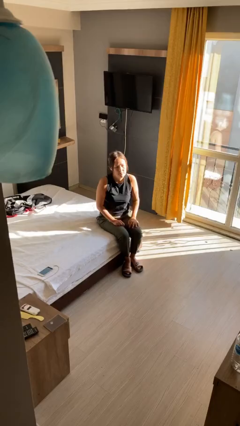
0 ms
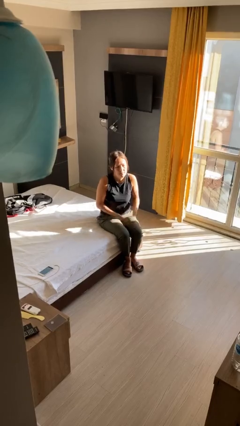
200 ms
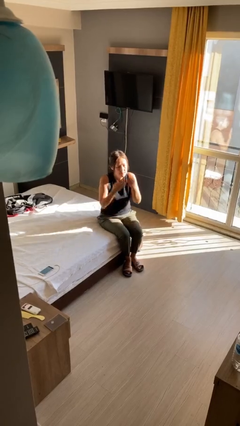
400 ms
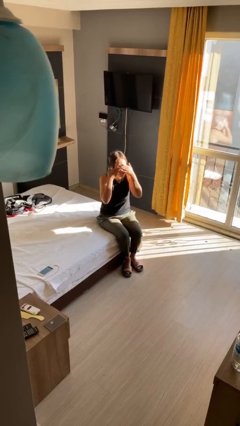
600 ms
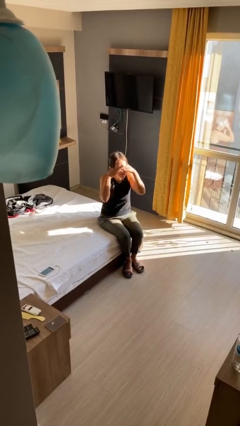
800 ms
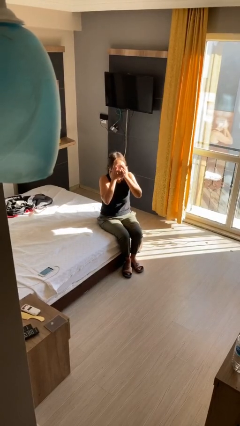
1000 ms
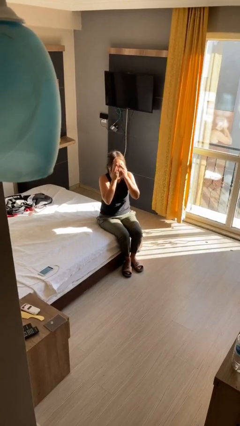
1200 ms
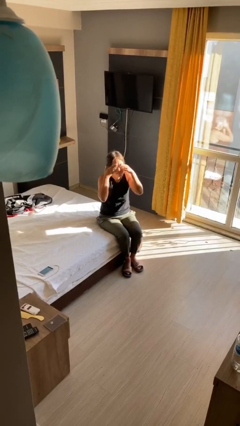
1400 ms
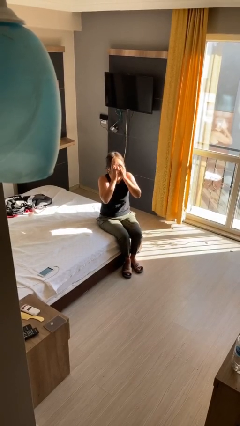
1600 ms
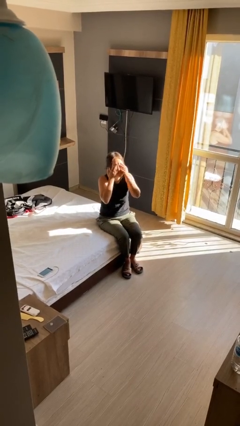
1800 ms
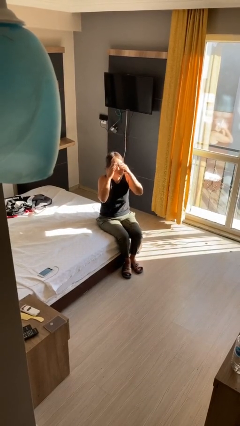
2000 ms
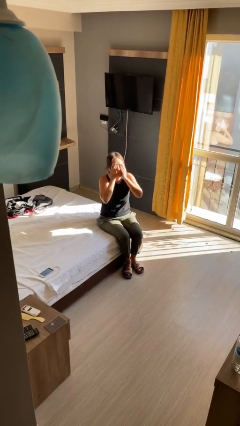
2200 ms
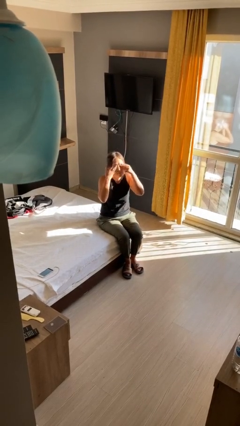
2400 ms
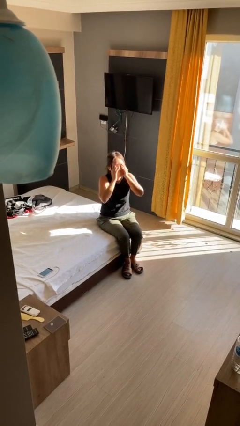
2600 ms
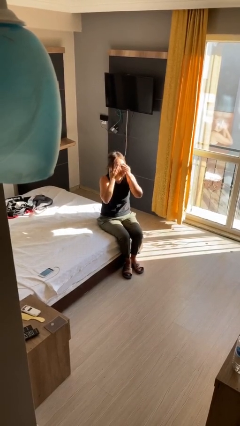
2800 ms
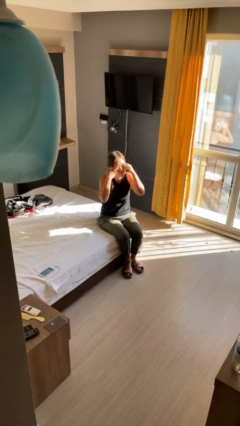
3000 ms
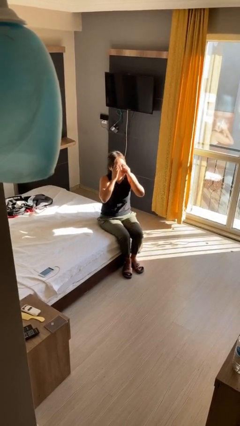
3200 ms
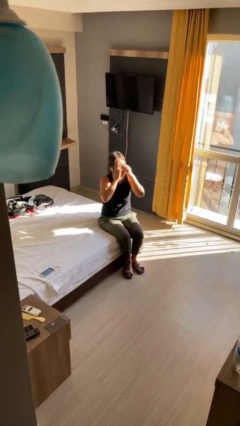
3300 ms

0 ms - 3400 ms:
person rubs eyes

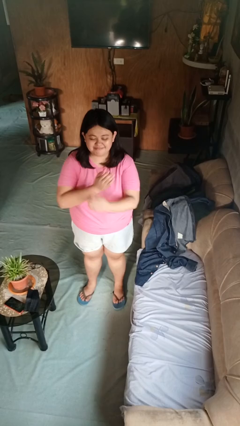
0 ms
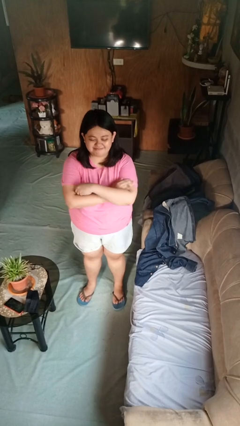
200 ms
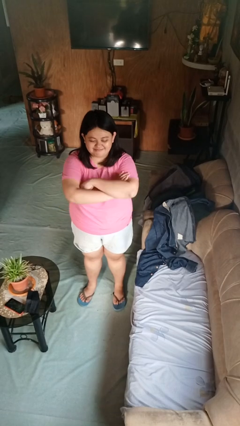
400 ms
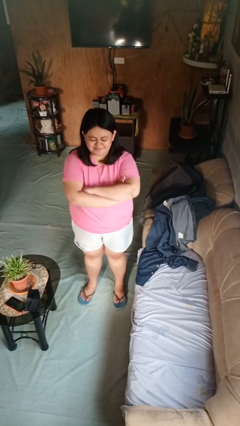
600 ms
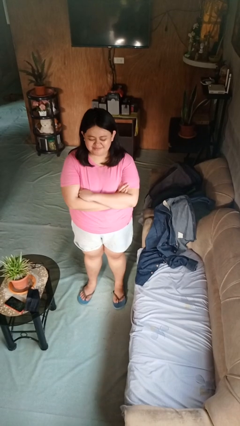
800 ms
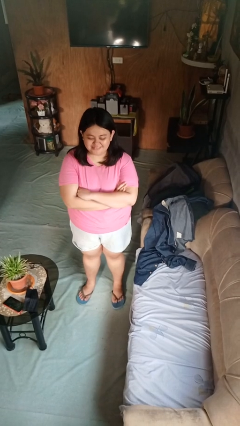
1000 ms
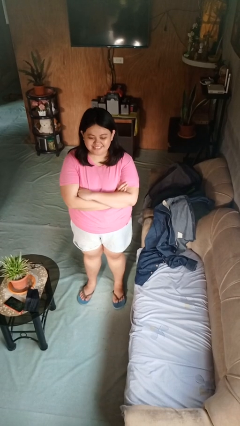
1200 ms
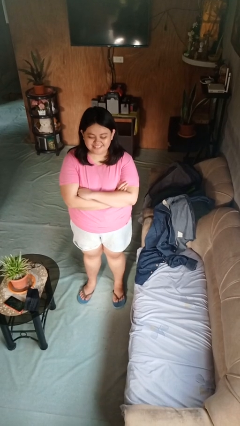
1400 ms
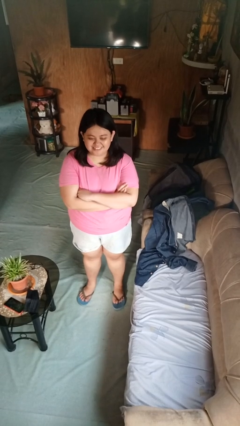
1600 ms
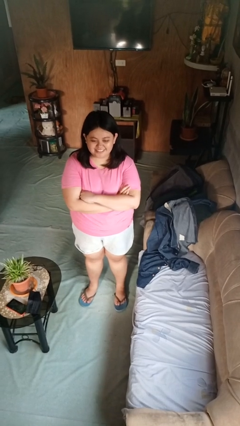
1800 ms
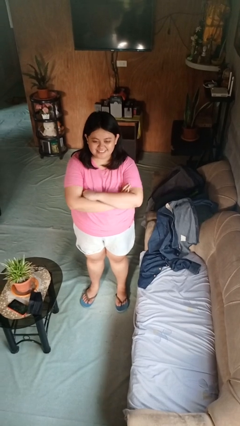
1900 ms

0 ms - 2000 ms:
person crosses arms

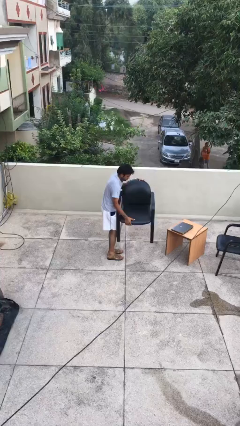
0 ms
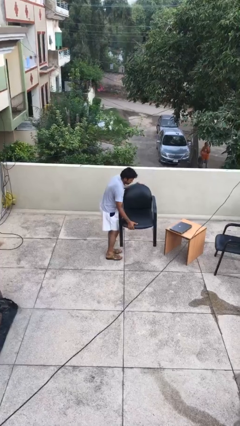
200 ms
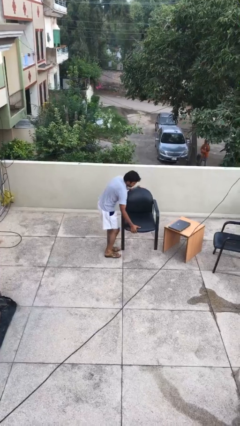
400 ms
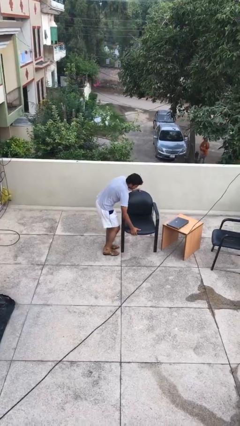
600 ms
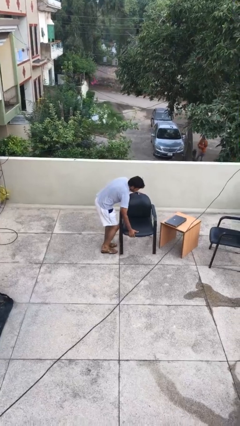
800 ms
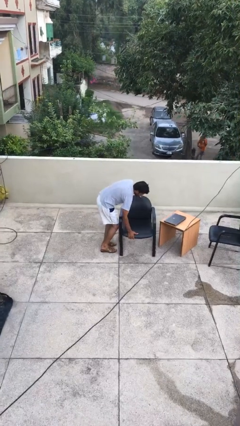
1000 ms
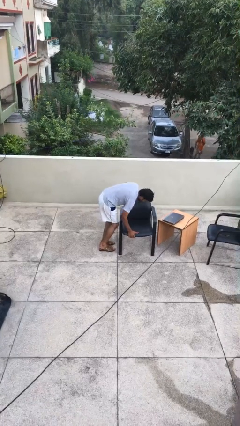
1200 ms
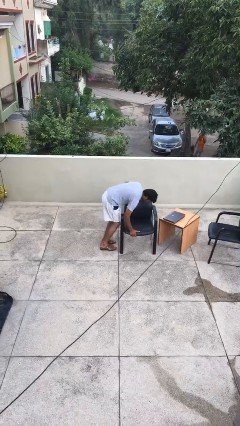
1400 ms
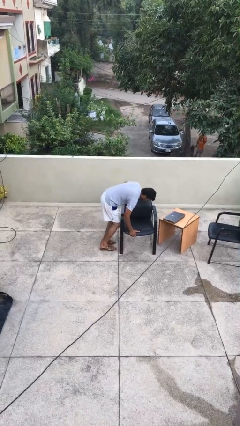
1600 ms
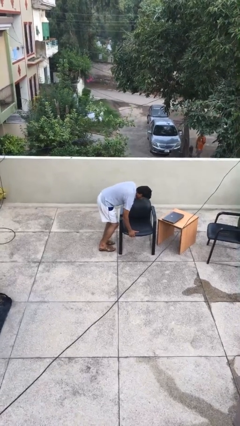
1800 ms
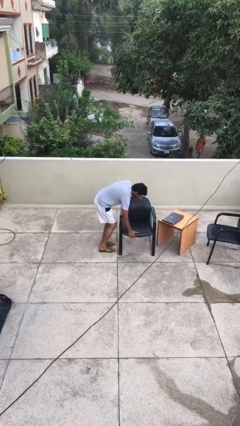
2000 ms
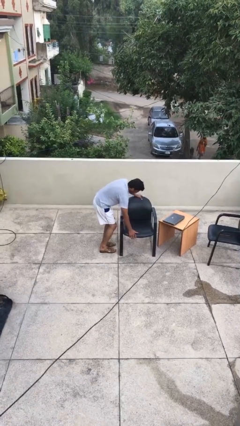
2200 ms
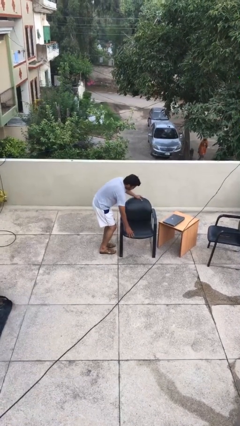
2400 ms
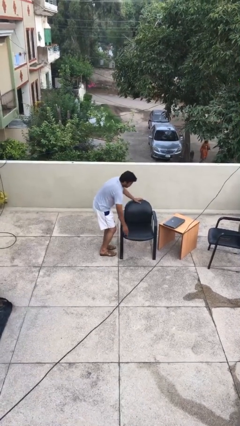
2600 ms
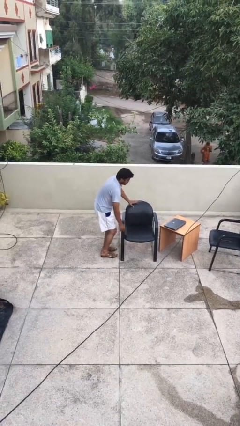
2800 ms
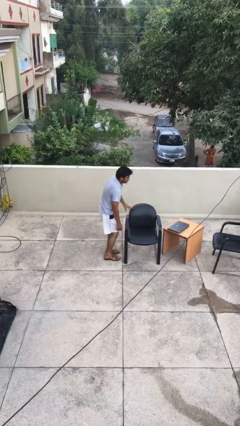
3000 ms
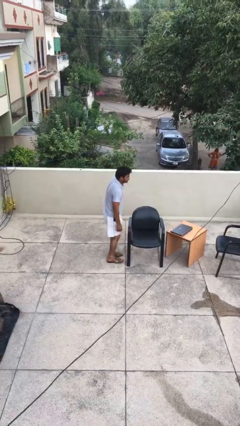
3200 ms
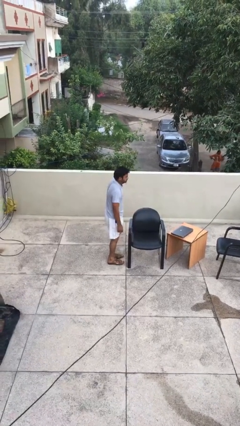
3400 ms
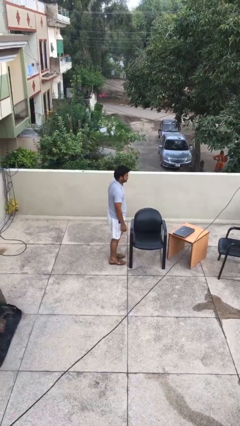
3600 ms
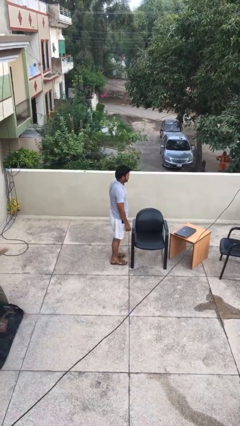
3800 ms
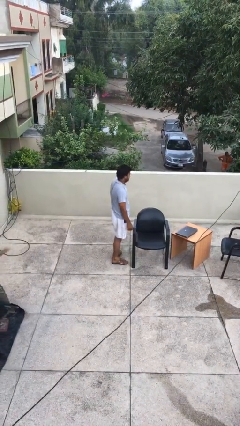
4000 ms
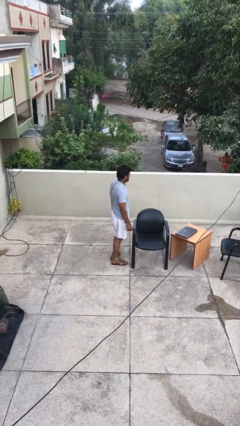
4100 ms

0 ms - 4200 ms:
person puts down object on floor

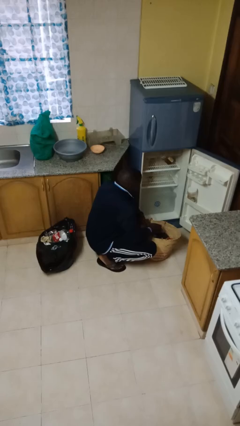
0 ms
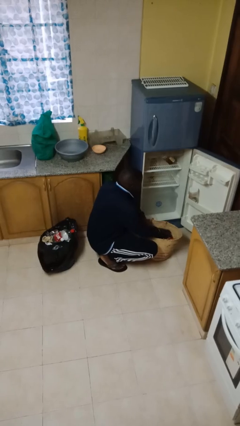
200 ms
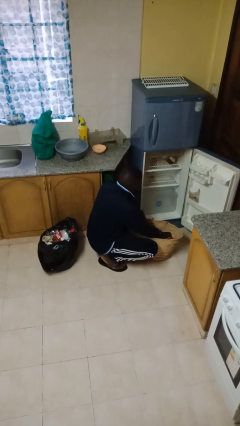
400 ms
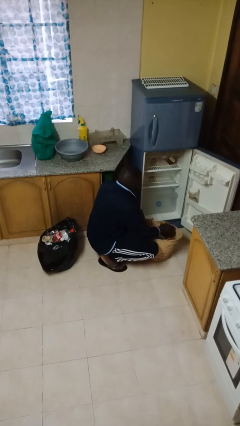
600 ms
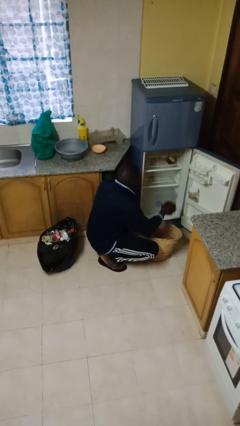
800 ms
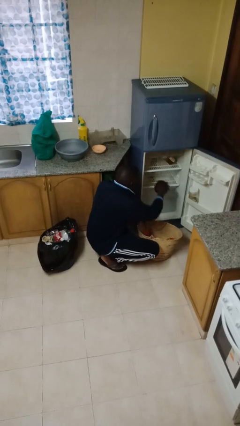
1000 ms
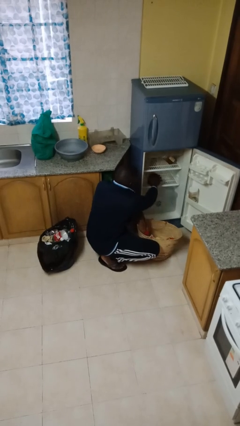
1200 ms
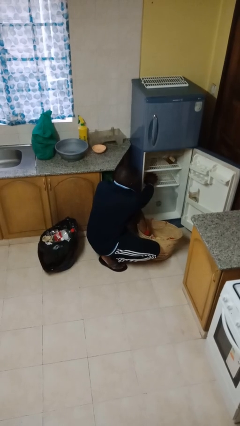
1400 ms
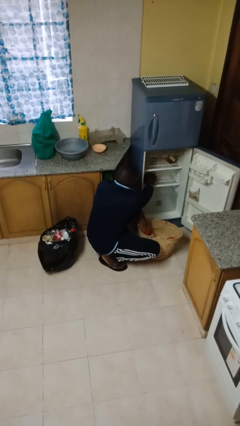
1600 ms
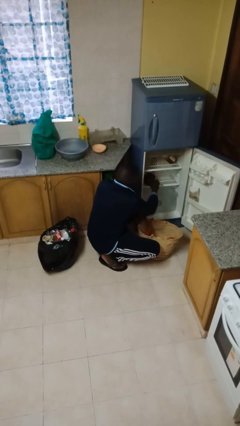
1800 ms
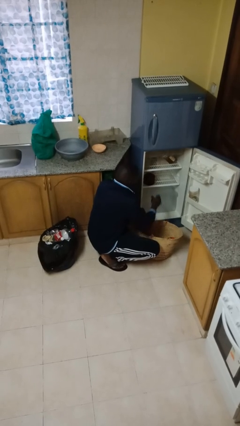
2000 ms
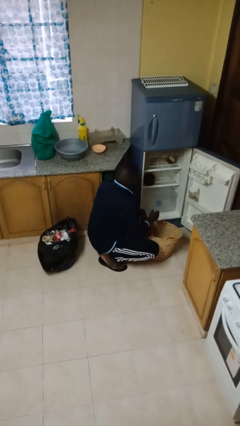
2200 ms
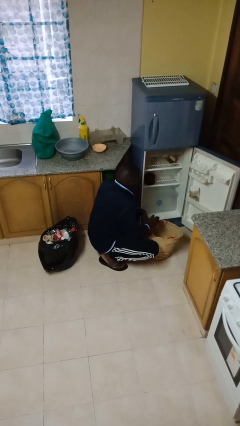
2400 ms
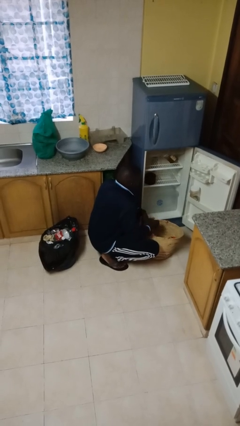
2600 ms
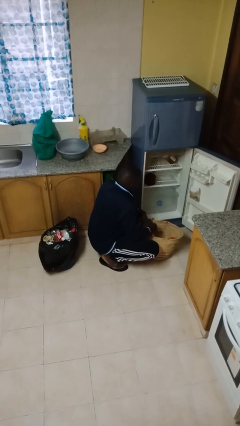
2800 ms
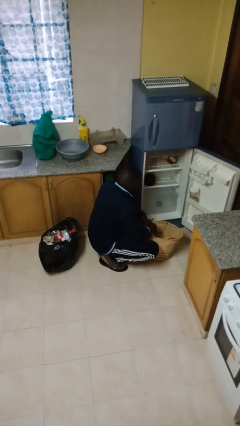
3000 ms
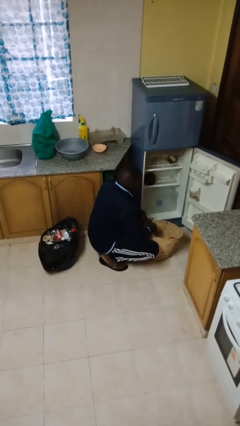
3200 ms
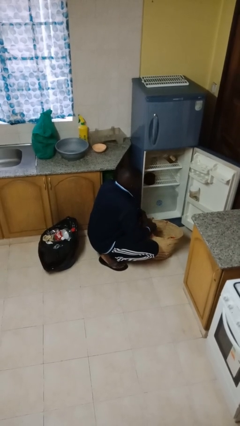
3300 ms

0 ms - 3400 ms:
person loads groceries into refrigerator

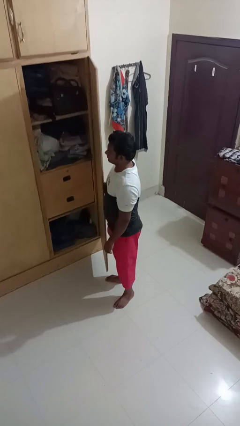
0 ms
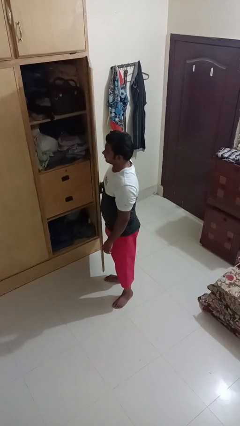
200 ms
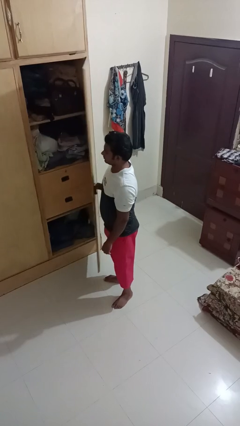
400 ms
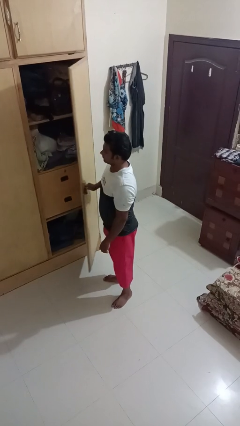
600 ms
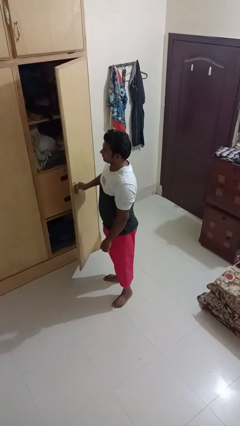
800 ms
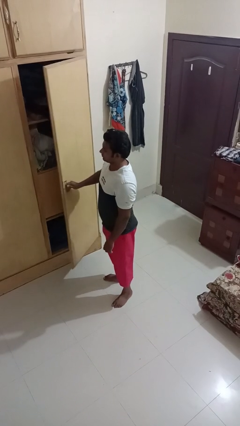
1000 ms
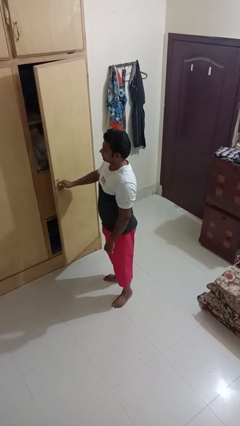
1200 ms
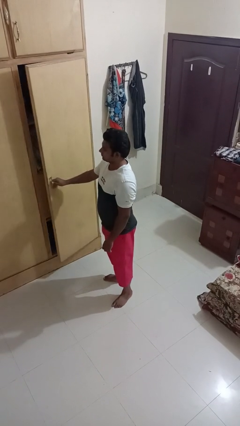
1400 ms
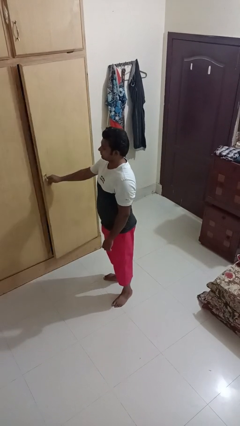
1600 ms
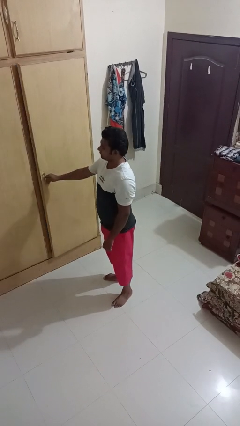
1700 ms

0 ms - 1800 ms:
person closes closet door

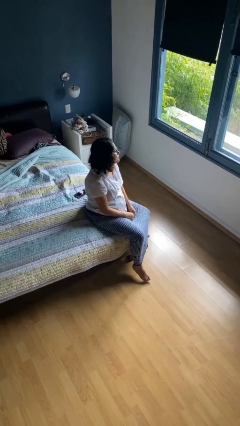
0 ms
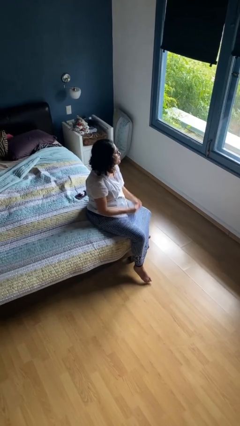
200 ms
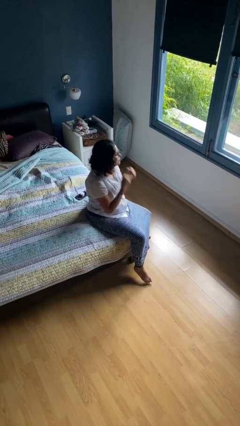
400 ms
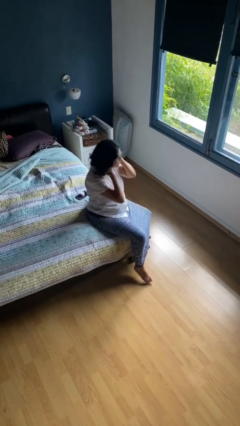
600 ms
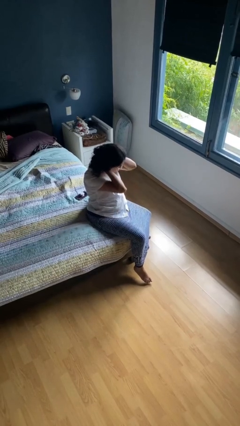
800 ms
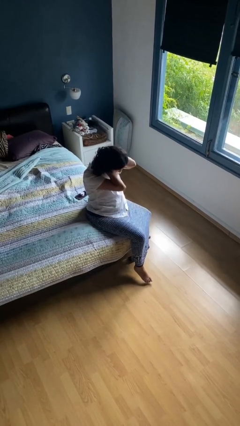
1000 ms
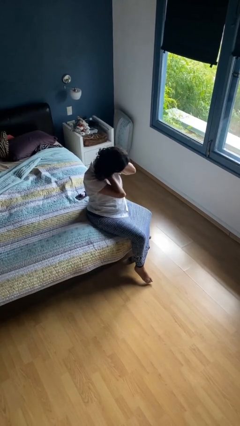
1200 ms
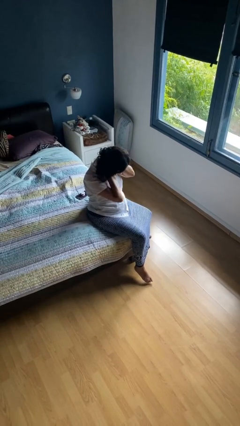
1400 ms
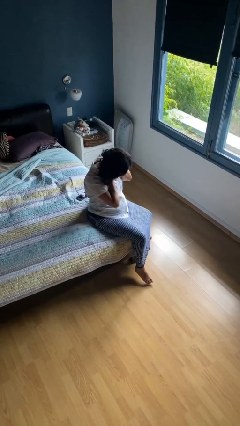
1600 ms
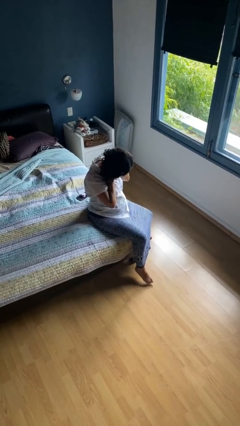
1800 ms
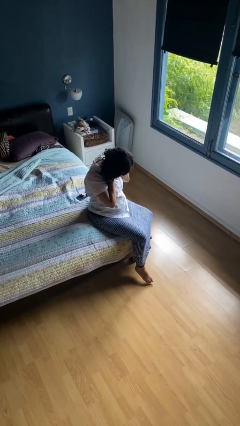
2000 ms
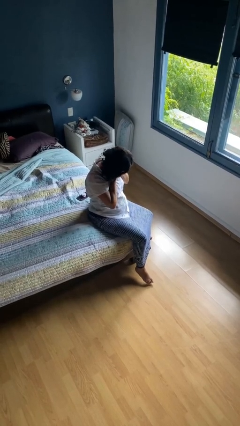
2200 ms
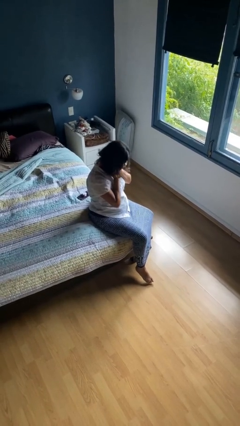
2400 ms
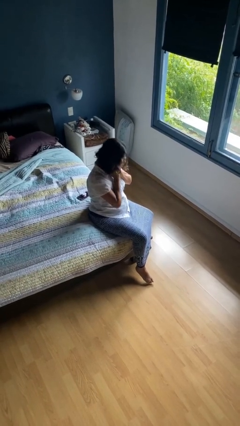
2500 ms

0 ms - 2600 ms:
person rubs neck

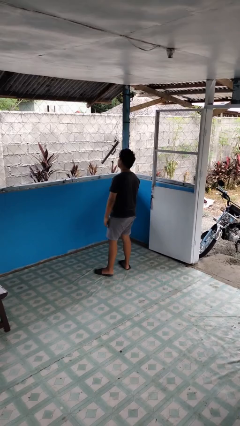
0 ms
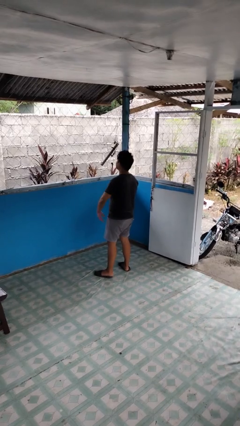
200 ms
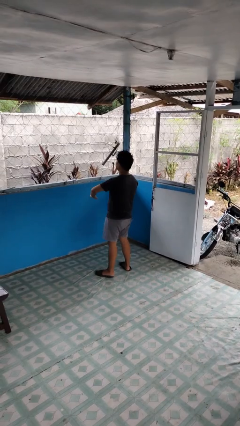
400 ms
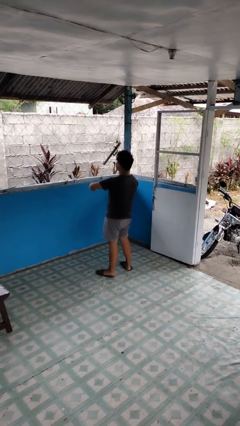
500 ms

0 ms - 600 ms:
person gestures swipe up
